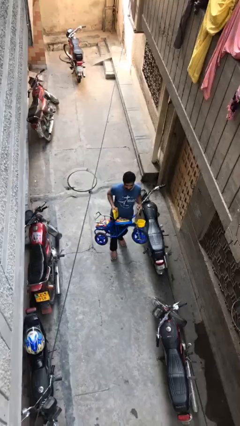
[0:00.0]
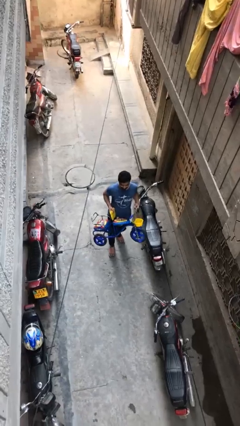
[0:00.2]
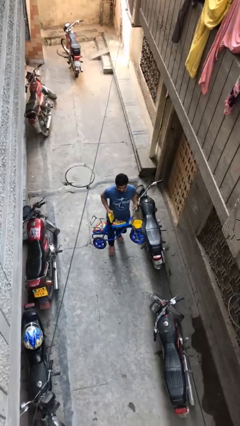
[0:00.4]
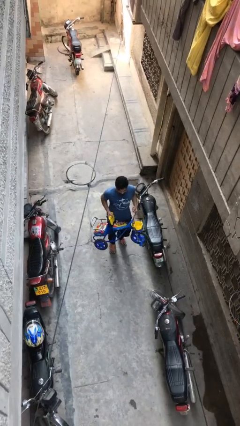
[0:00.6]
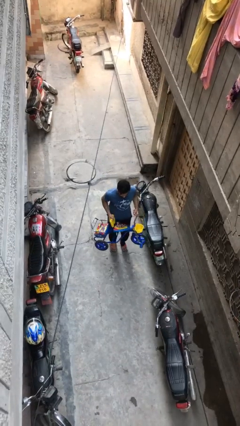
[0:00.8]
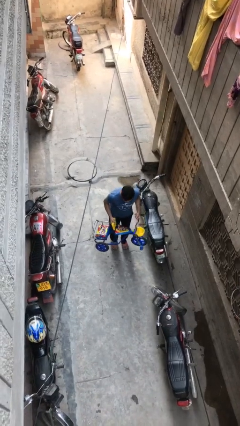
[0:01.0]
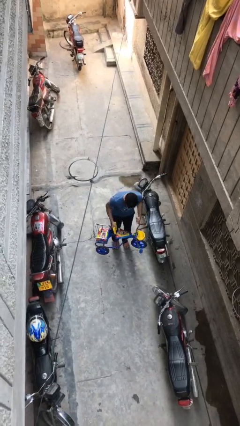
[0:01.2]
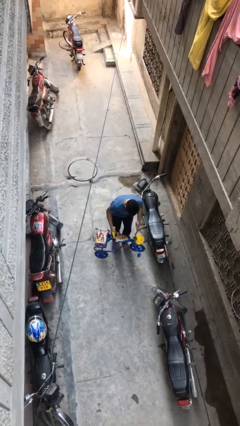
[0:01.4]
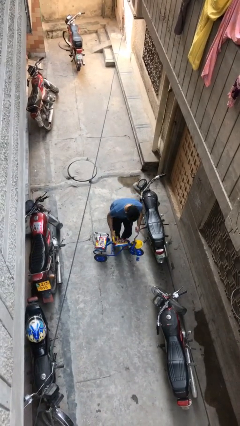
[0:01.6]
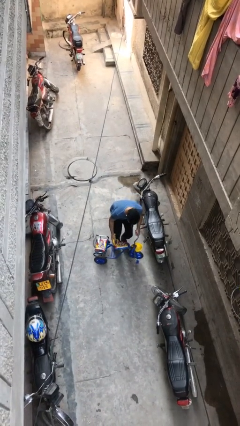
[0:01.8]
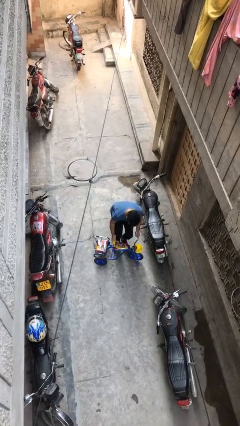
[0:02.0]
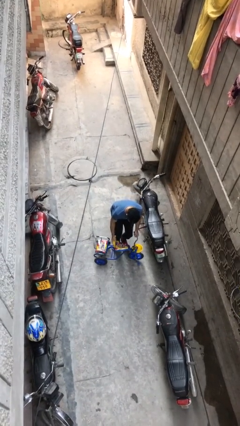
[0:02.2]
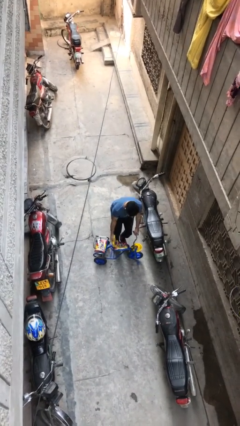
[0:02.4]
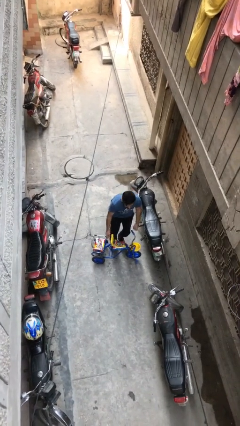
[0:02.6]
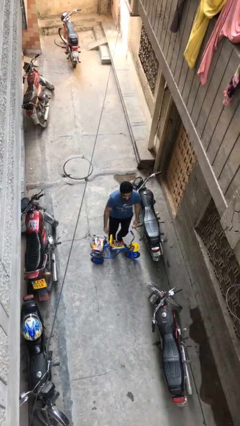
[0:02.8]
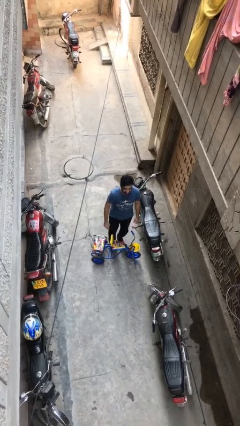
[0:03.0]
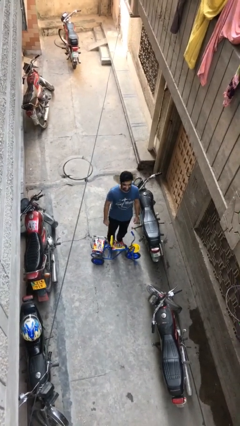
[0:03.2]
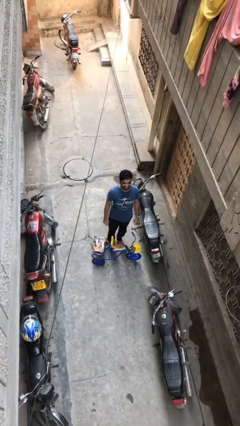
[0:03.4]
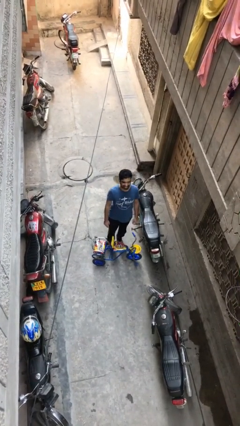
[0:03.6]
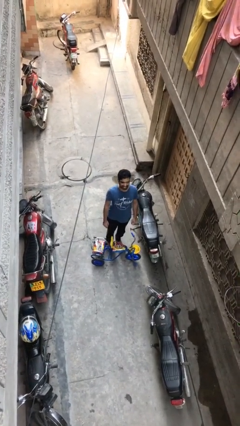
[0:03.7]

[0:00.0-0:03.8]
person puts down object on floor

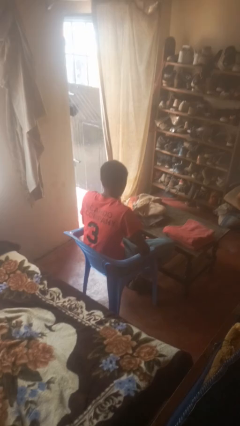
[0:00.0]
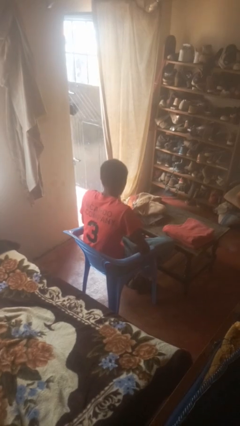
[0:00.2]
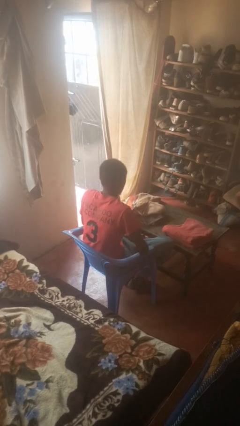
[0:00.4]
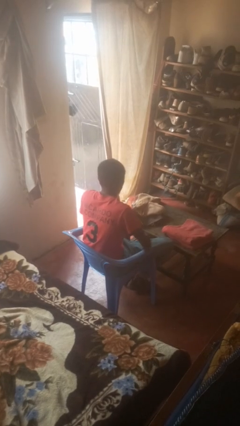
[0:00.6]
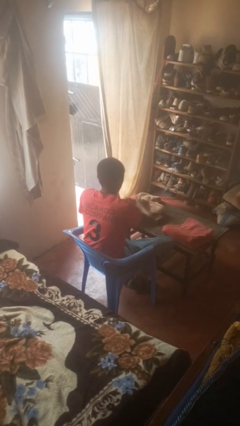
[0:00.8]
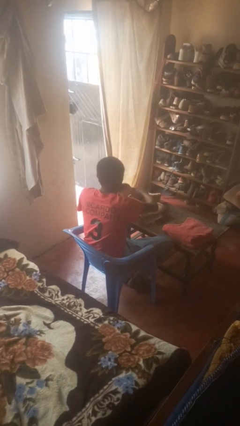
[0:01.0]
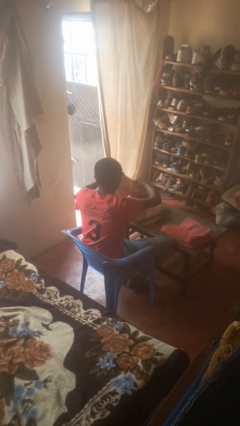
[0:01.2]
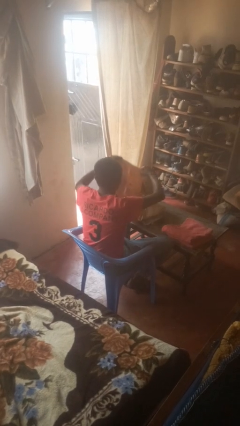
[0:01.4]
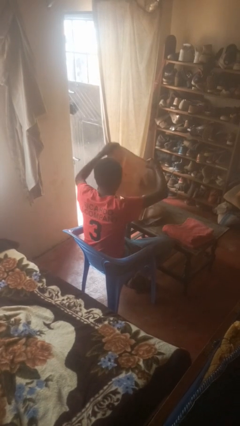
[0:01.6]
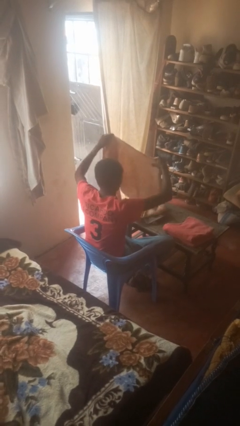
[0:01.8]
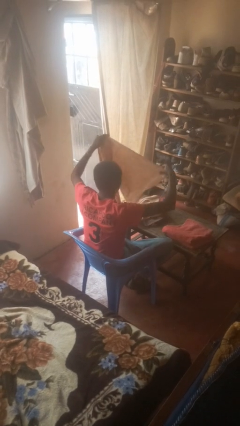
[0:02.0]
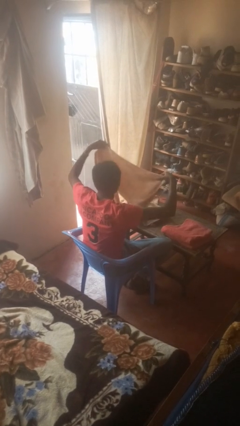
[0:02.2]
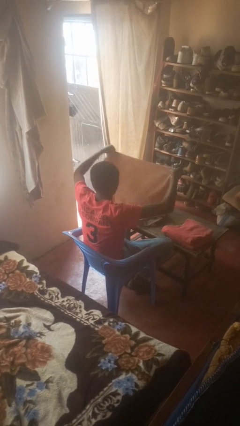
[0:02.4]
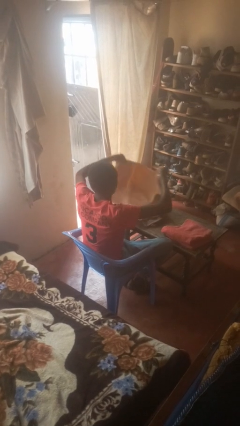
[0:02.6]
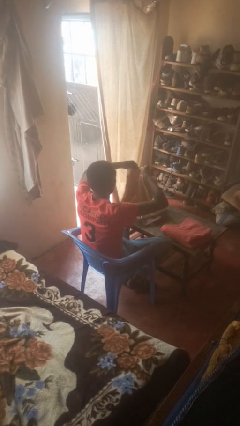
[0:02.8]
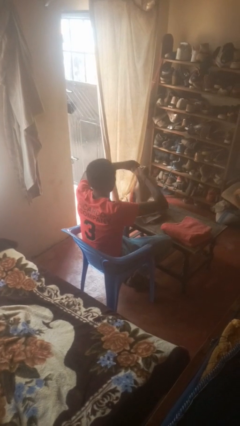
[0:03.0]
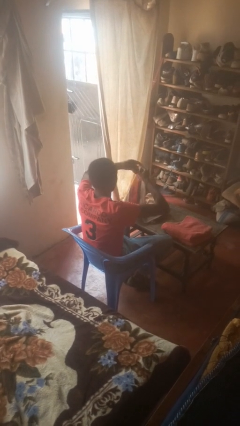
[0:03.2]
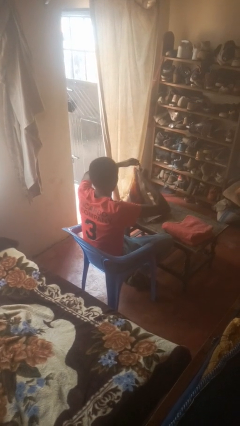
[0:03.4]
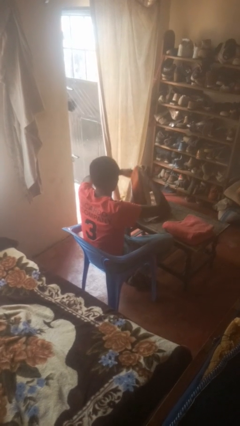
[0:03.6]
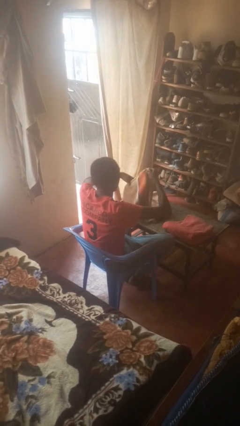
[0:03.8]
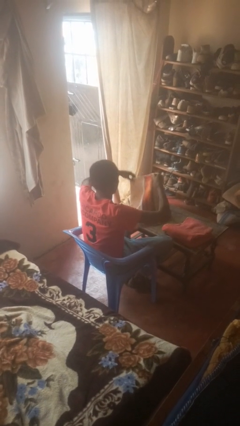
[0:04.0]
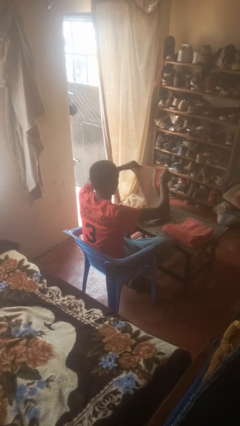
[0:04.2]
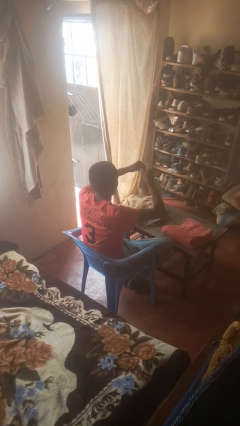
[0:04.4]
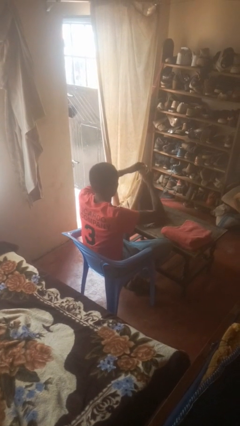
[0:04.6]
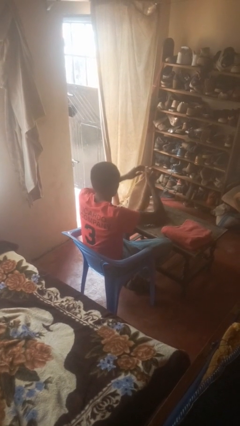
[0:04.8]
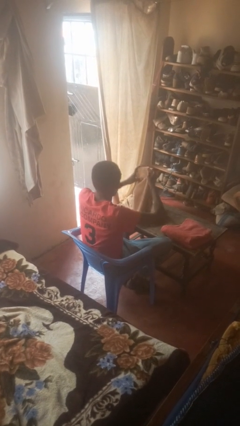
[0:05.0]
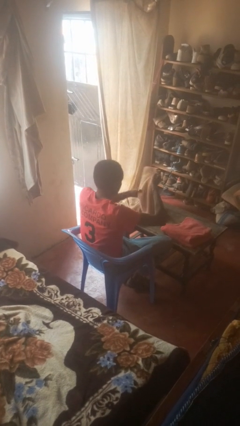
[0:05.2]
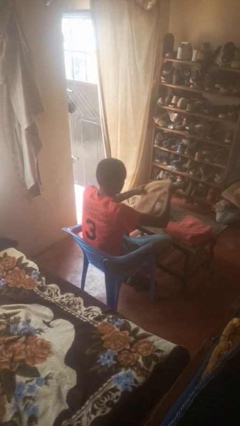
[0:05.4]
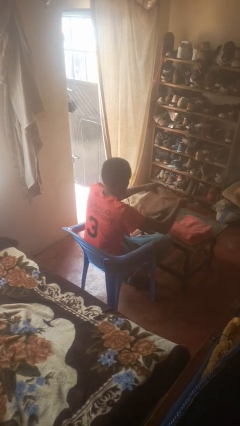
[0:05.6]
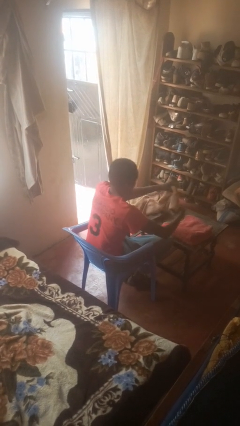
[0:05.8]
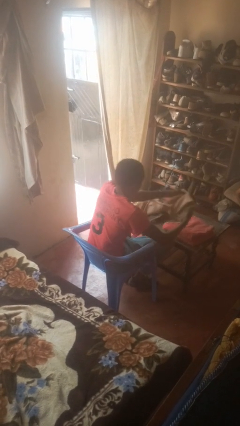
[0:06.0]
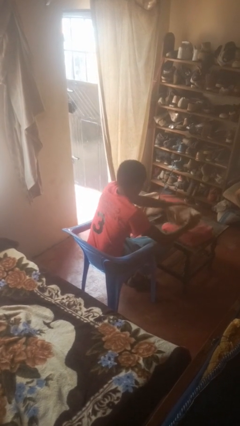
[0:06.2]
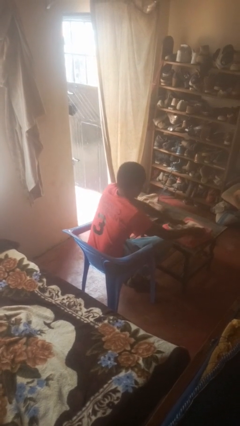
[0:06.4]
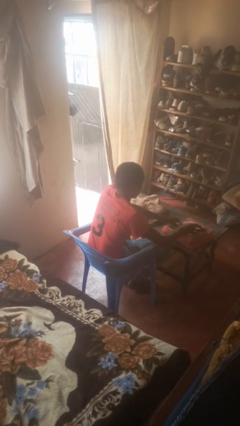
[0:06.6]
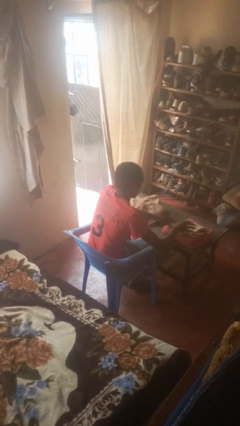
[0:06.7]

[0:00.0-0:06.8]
person folds towel

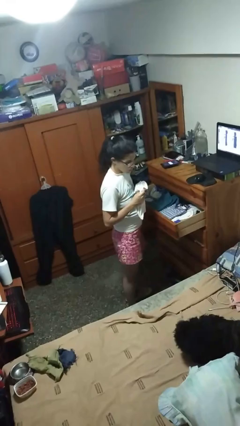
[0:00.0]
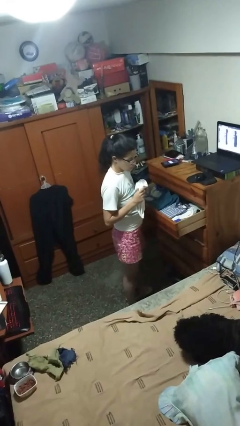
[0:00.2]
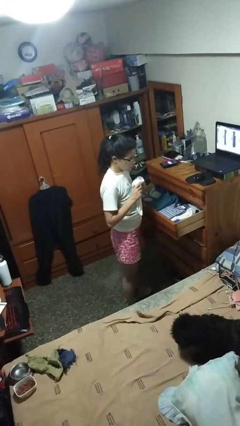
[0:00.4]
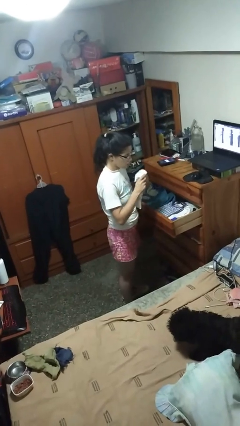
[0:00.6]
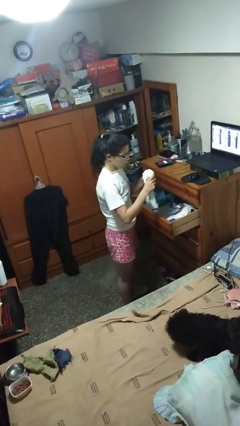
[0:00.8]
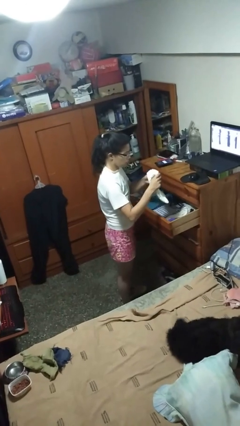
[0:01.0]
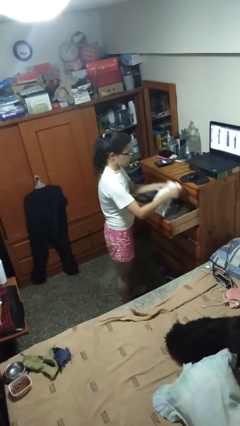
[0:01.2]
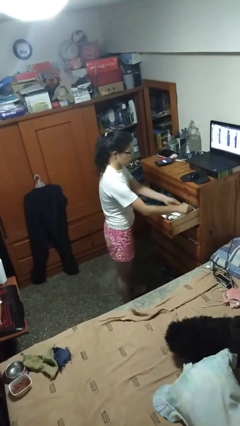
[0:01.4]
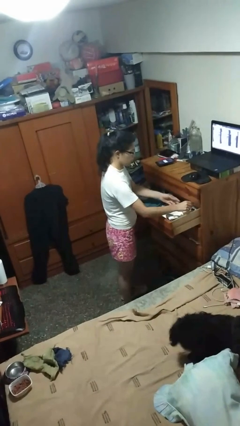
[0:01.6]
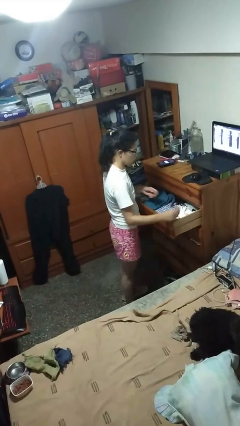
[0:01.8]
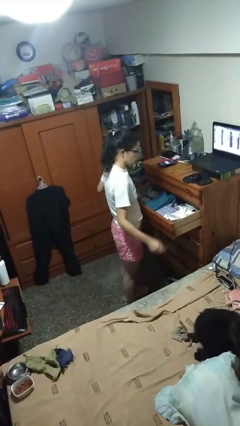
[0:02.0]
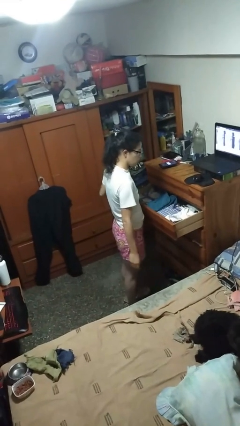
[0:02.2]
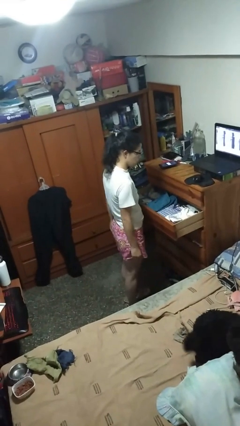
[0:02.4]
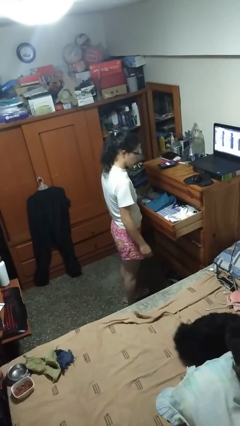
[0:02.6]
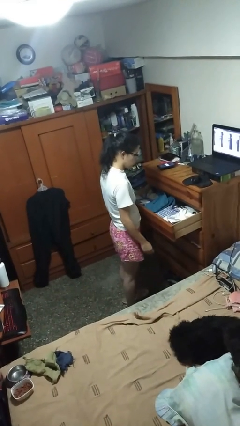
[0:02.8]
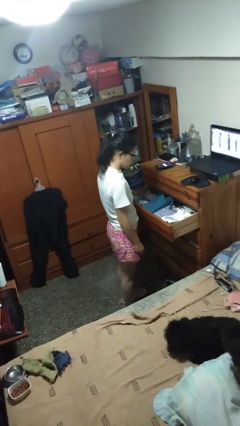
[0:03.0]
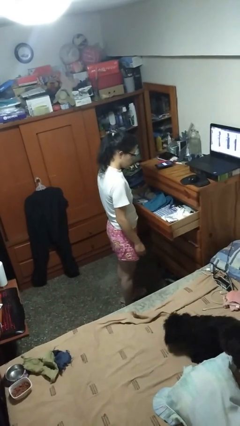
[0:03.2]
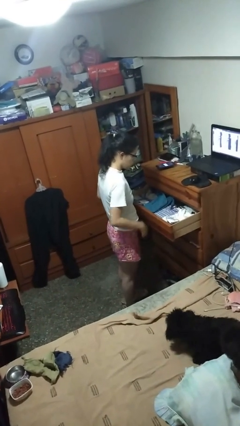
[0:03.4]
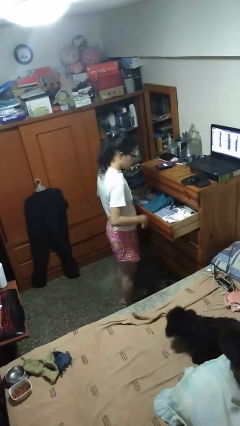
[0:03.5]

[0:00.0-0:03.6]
person puts clothes into dresser

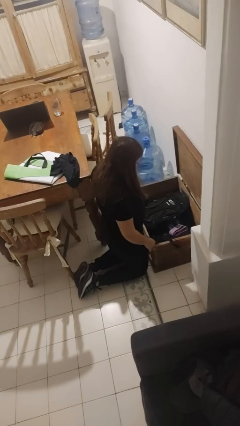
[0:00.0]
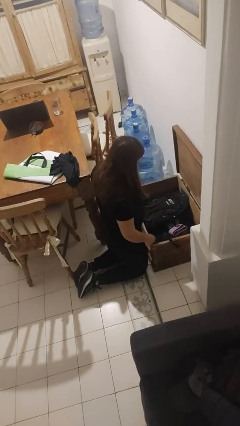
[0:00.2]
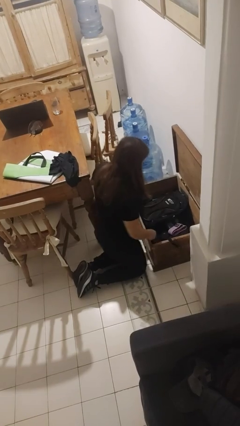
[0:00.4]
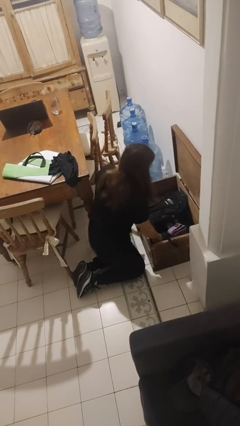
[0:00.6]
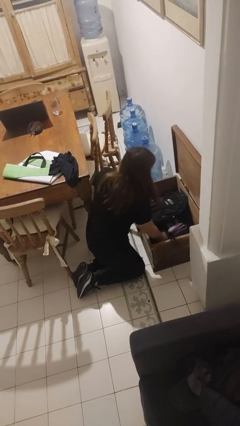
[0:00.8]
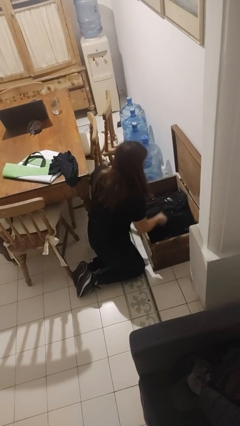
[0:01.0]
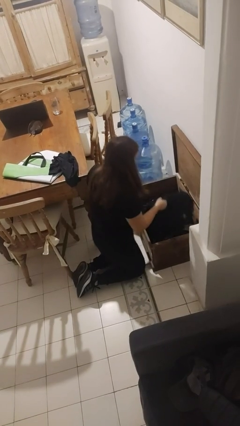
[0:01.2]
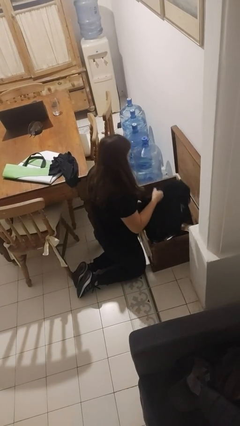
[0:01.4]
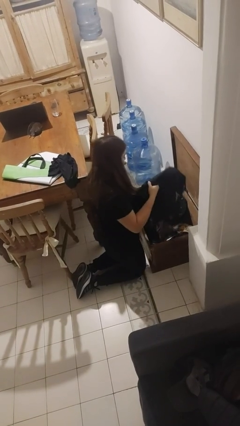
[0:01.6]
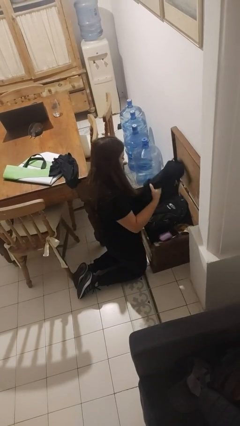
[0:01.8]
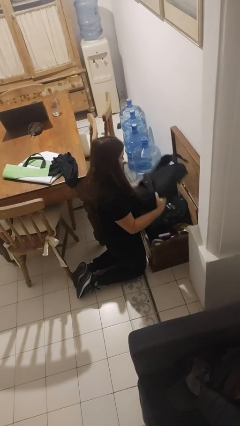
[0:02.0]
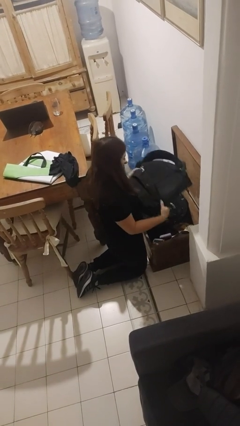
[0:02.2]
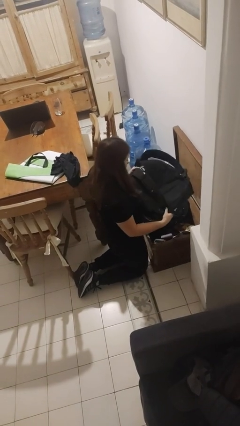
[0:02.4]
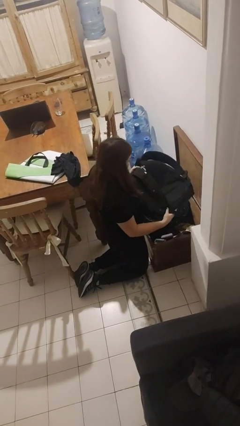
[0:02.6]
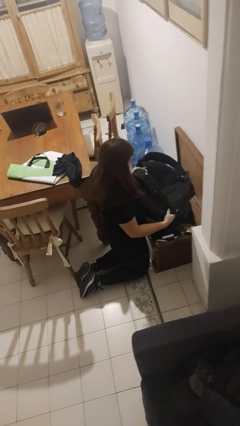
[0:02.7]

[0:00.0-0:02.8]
person takes object from box

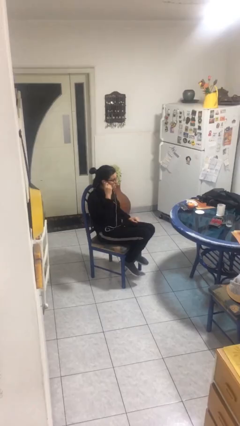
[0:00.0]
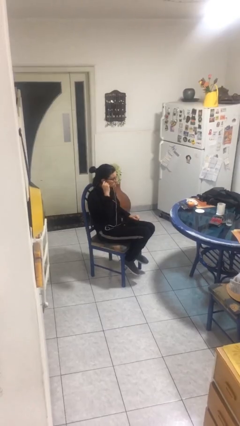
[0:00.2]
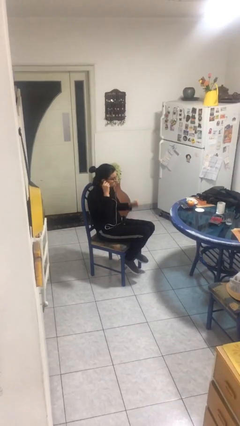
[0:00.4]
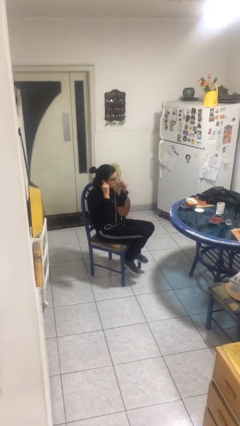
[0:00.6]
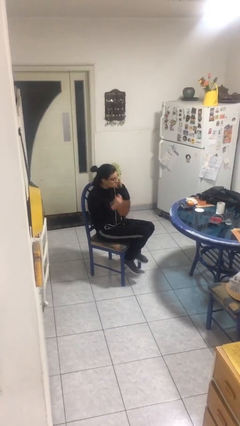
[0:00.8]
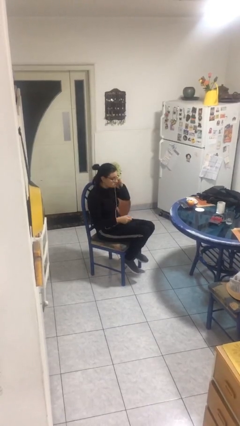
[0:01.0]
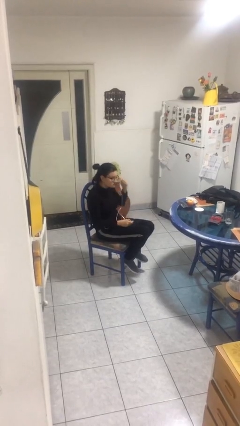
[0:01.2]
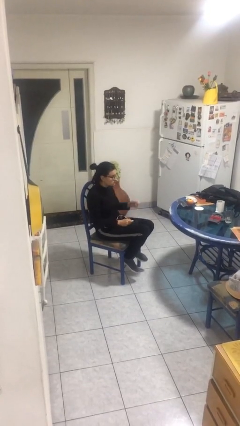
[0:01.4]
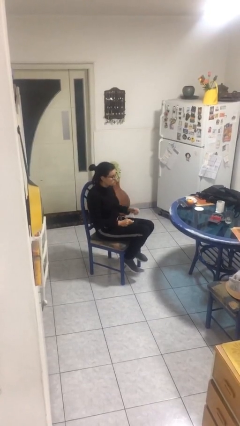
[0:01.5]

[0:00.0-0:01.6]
person takes off headphones
